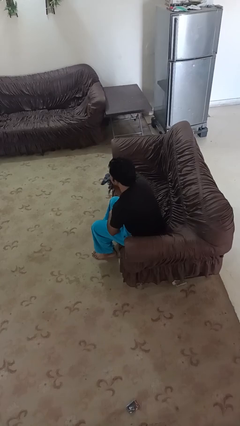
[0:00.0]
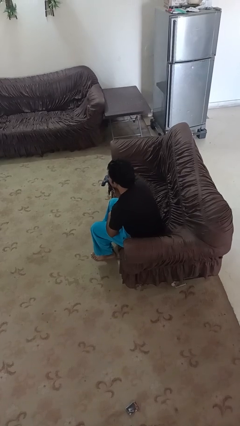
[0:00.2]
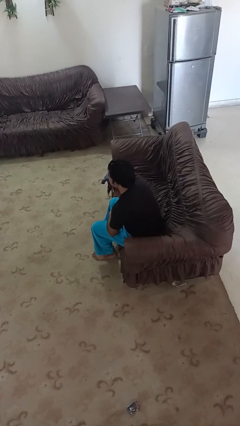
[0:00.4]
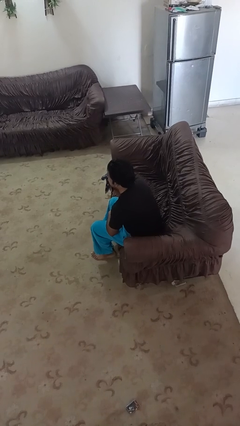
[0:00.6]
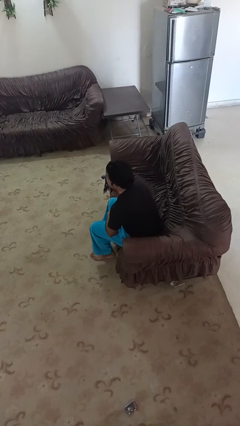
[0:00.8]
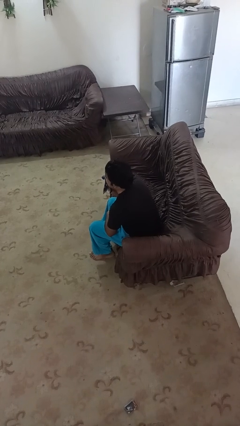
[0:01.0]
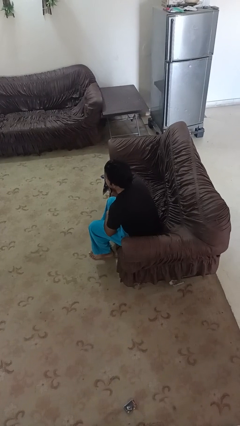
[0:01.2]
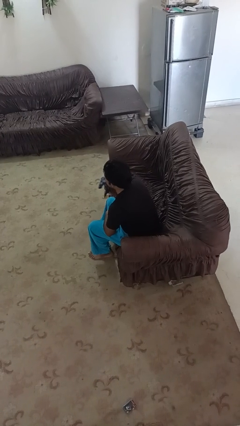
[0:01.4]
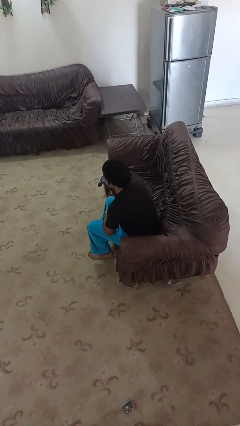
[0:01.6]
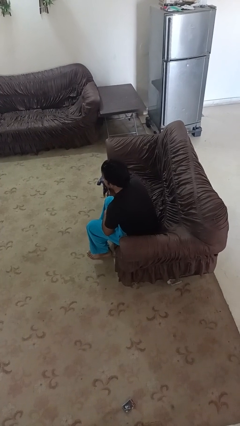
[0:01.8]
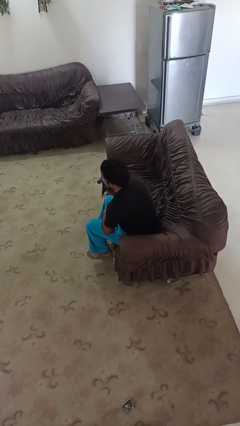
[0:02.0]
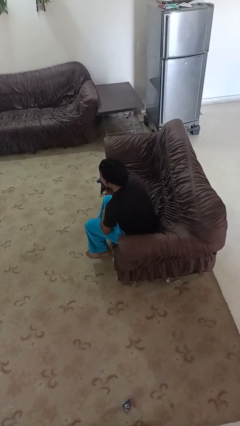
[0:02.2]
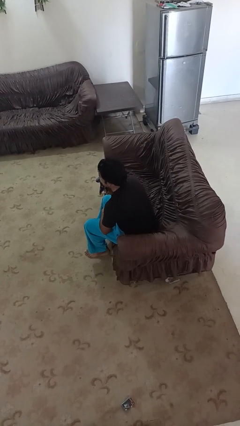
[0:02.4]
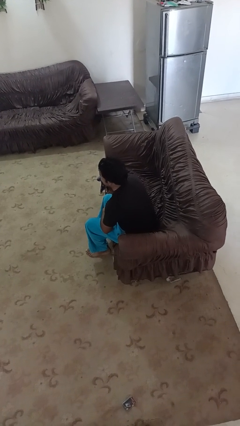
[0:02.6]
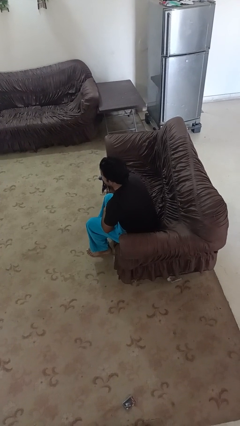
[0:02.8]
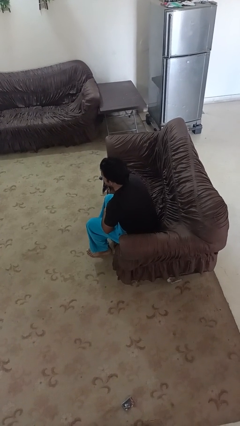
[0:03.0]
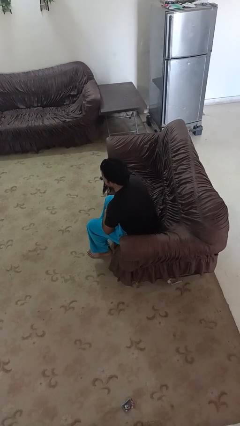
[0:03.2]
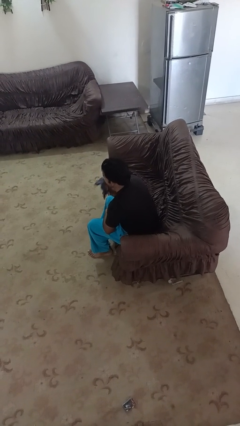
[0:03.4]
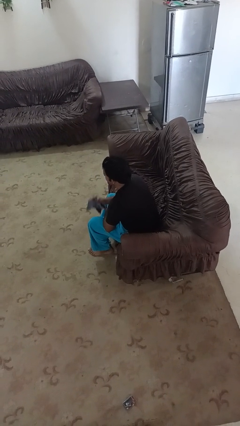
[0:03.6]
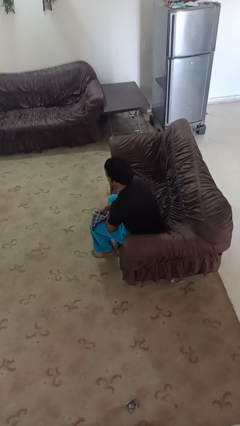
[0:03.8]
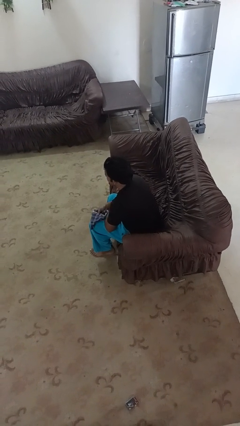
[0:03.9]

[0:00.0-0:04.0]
person wipes mouth with napkin

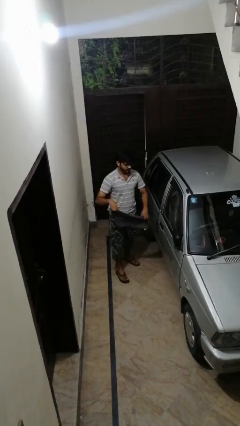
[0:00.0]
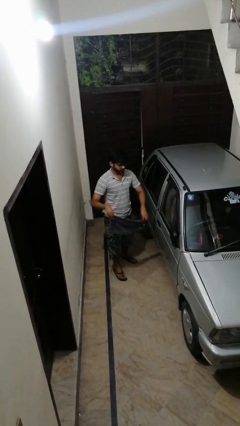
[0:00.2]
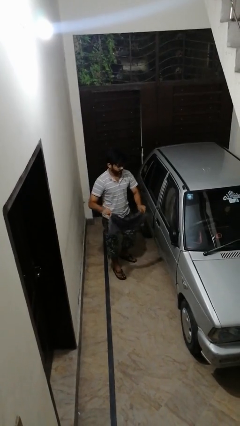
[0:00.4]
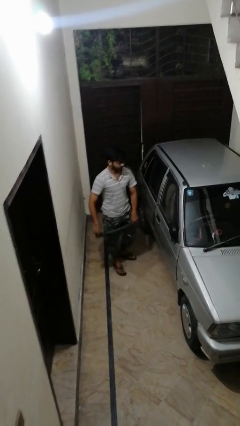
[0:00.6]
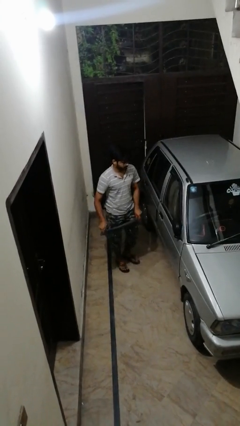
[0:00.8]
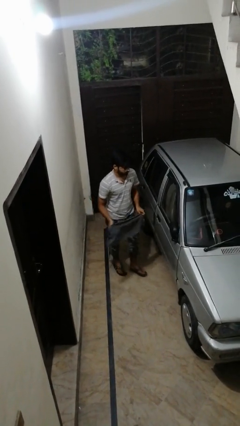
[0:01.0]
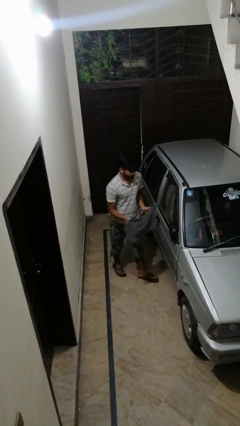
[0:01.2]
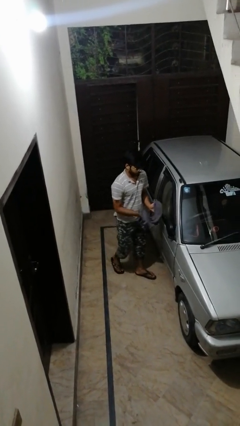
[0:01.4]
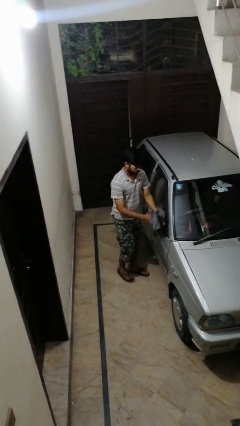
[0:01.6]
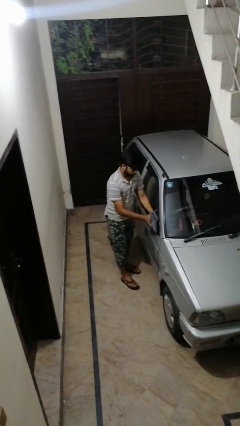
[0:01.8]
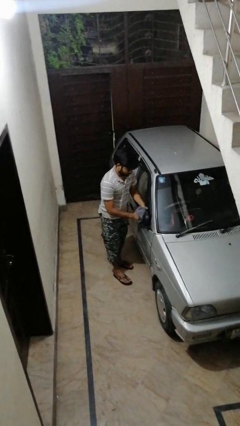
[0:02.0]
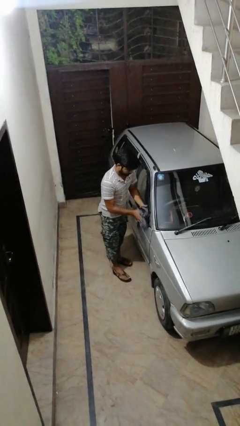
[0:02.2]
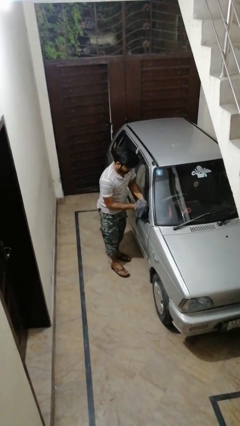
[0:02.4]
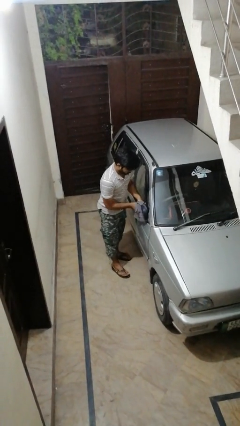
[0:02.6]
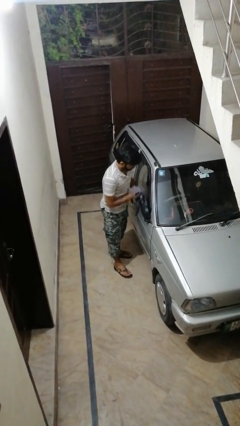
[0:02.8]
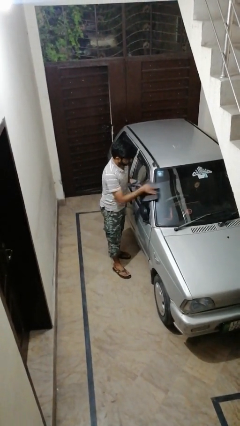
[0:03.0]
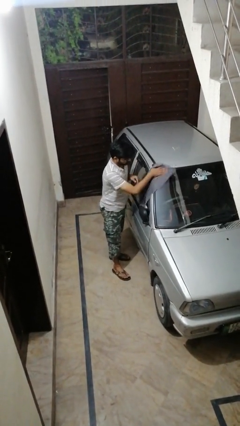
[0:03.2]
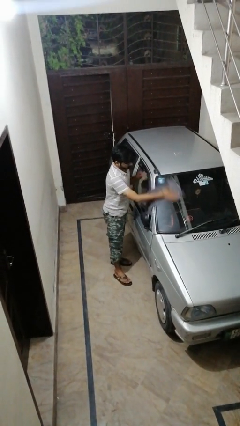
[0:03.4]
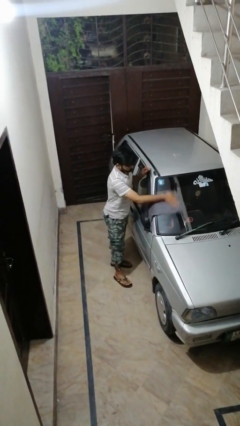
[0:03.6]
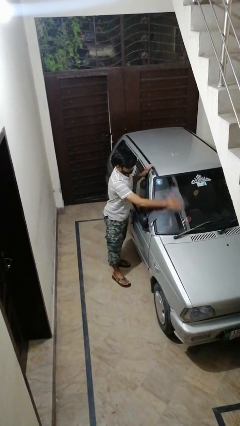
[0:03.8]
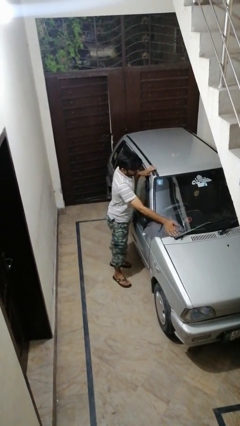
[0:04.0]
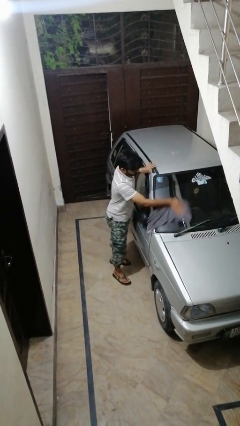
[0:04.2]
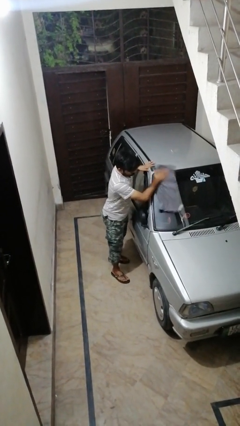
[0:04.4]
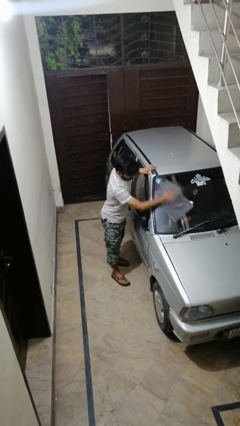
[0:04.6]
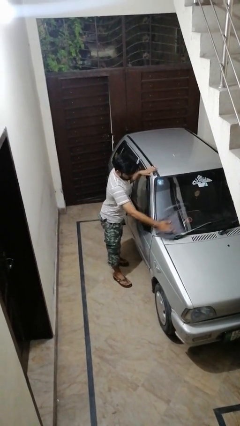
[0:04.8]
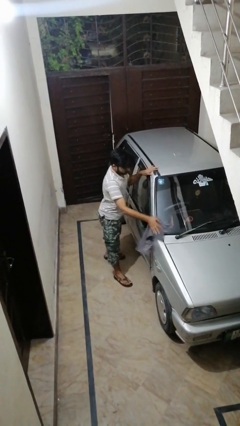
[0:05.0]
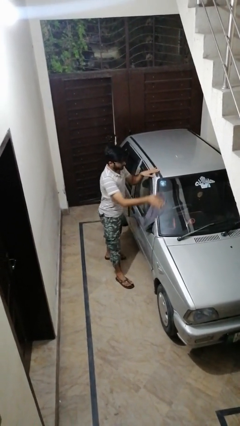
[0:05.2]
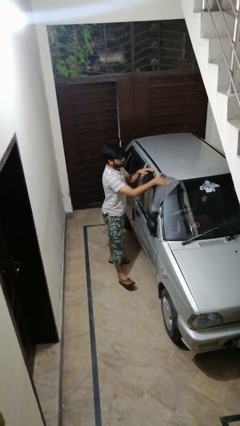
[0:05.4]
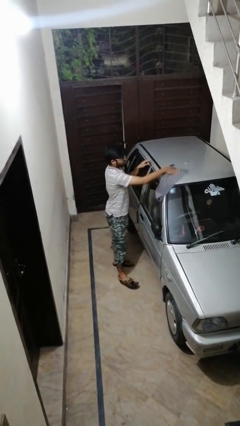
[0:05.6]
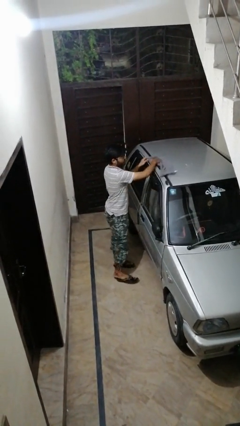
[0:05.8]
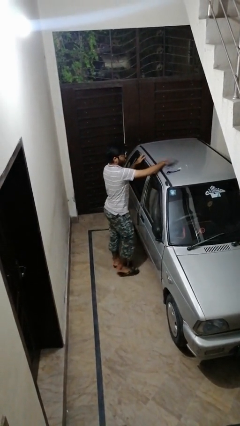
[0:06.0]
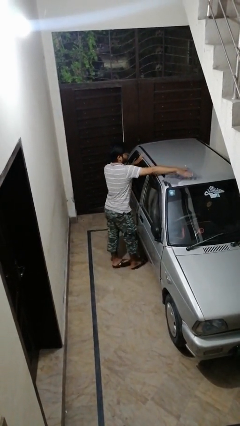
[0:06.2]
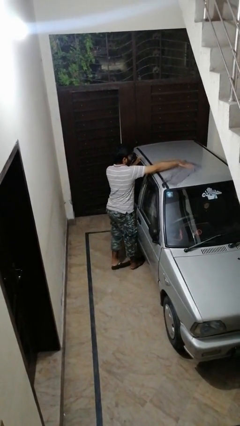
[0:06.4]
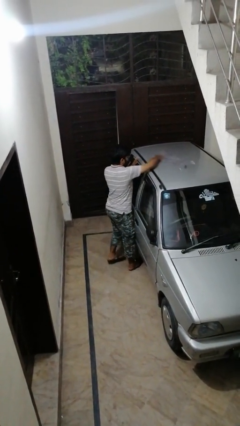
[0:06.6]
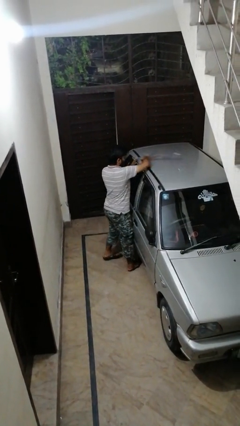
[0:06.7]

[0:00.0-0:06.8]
person polishes car with rag

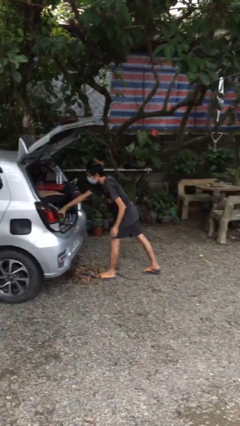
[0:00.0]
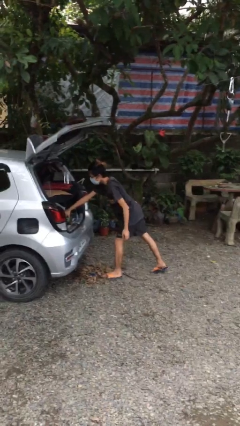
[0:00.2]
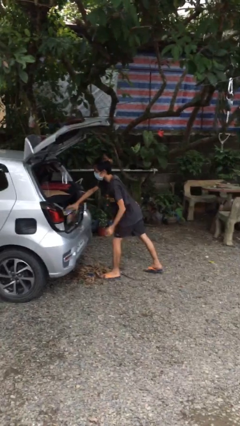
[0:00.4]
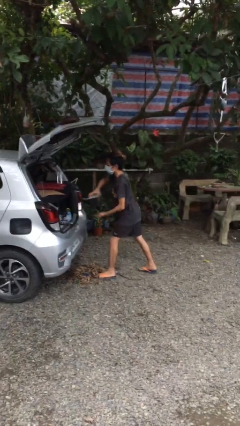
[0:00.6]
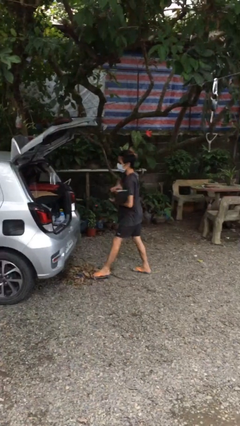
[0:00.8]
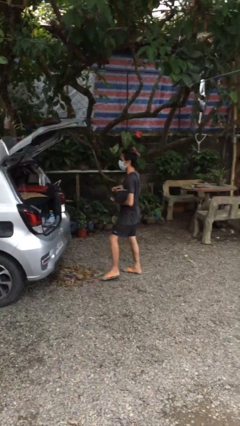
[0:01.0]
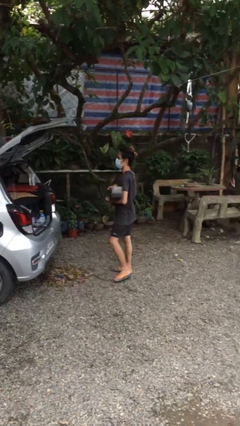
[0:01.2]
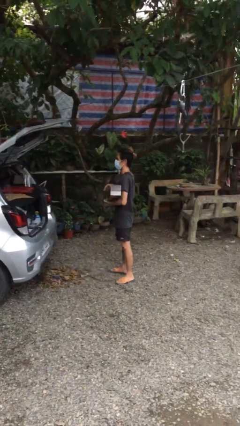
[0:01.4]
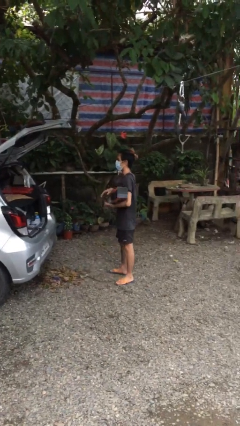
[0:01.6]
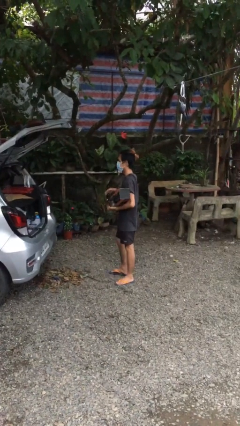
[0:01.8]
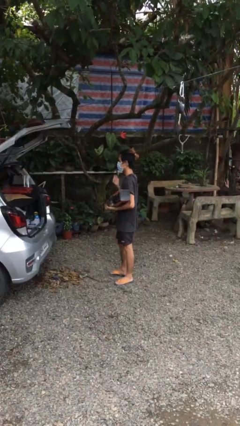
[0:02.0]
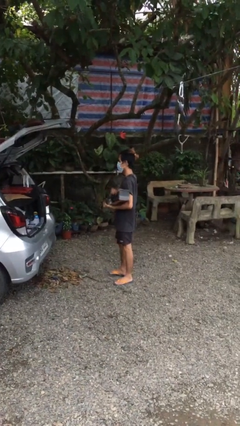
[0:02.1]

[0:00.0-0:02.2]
person unloads car

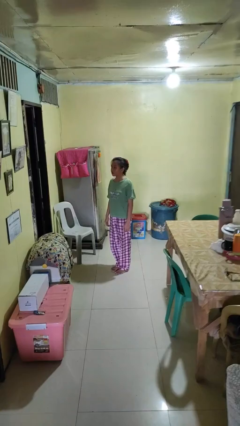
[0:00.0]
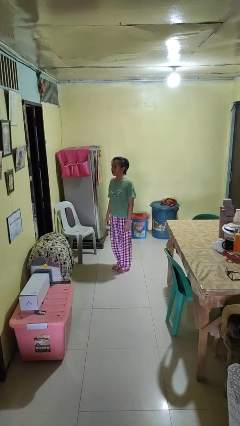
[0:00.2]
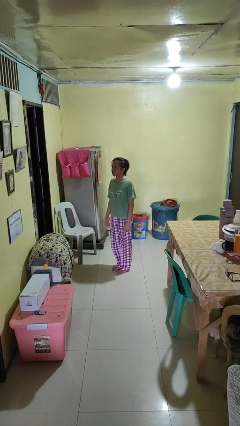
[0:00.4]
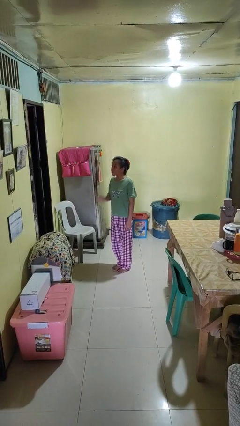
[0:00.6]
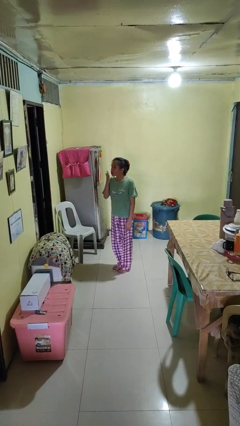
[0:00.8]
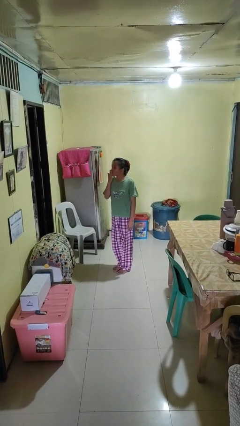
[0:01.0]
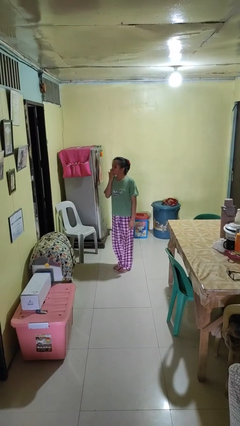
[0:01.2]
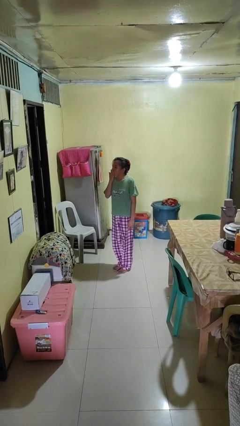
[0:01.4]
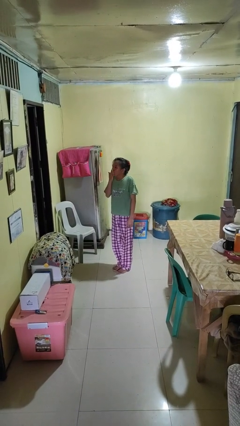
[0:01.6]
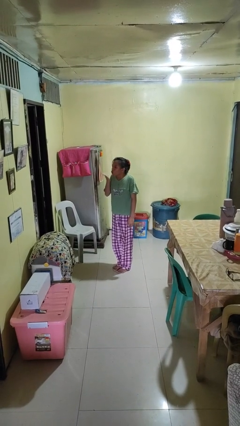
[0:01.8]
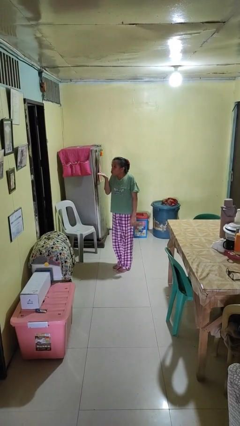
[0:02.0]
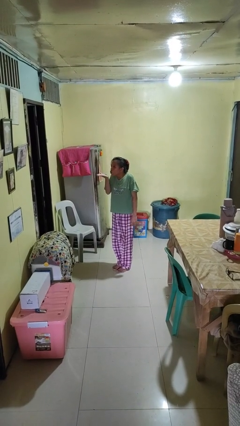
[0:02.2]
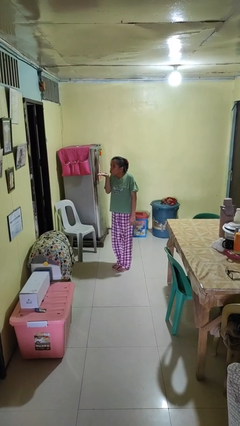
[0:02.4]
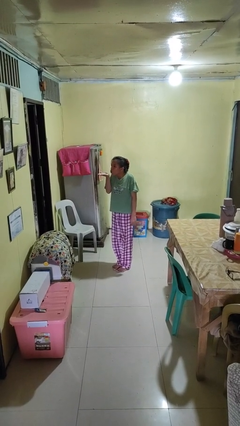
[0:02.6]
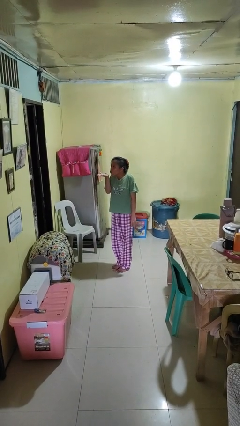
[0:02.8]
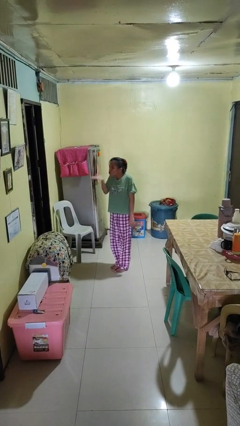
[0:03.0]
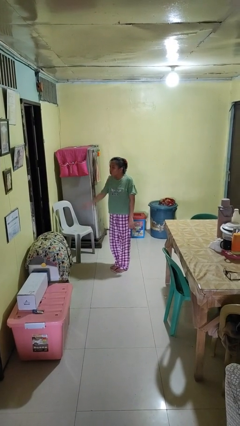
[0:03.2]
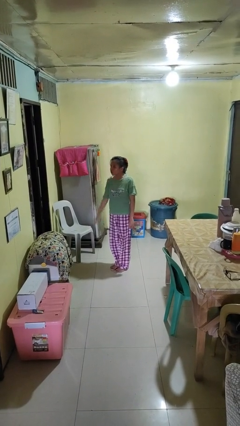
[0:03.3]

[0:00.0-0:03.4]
person gestures blow kiss

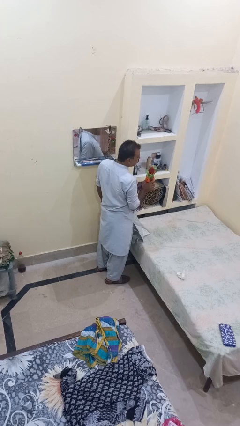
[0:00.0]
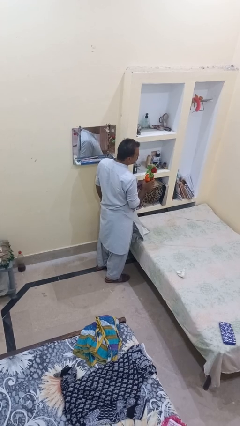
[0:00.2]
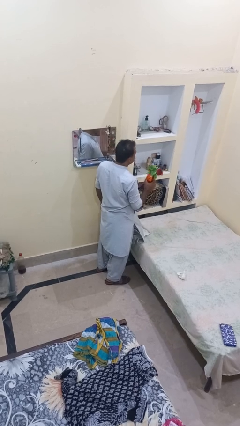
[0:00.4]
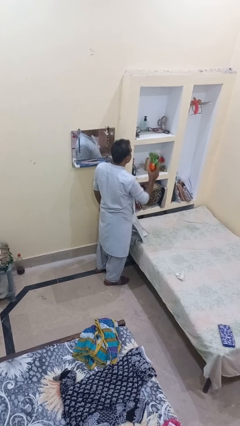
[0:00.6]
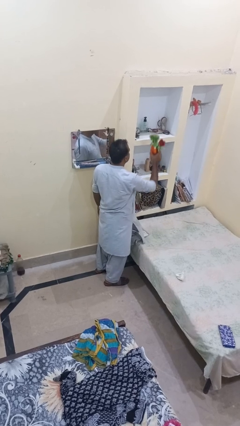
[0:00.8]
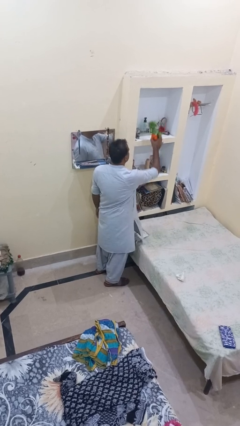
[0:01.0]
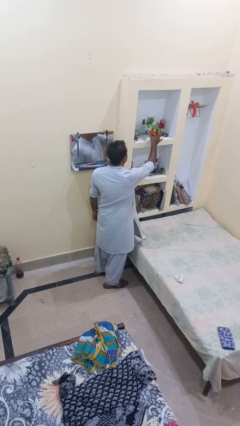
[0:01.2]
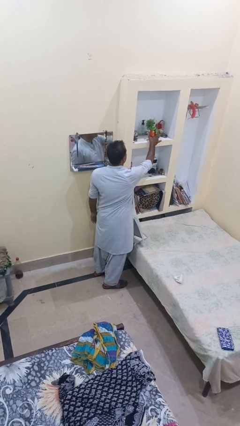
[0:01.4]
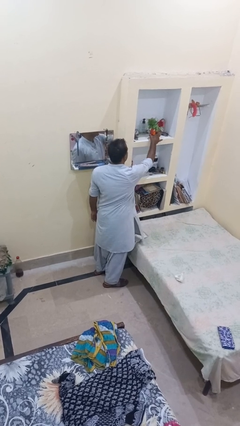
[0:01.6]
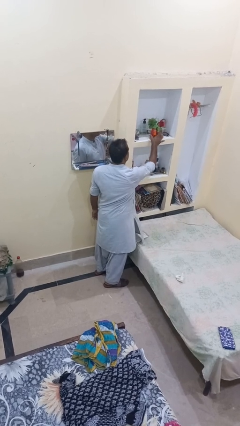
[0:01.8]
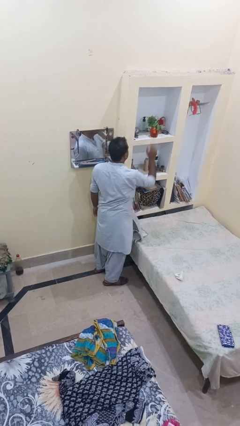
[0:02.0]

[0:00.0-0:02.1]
person puts down object on shelf
